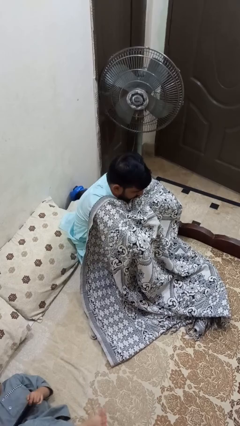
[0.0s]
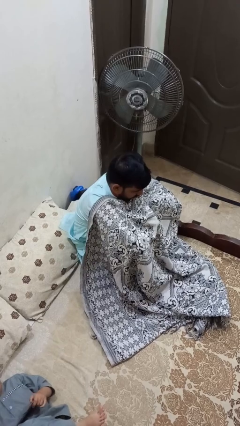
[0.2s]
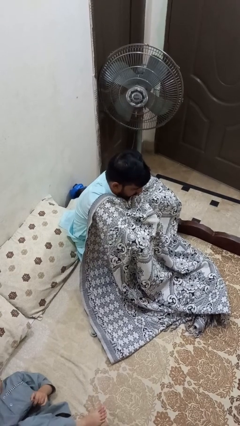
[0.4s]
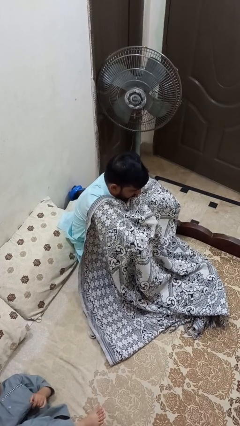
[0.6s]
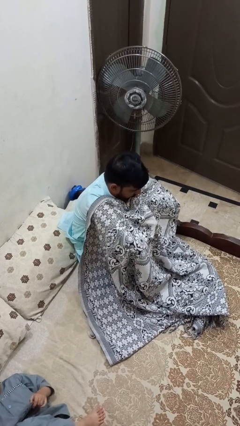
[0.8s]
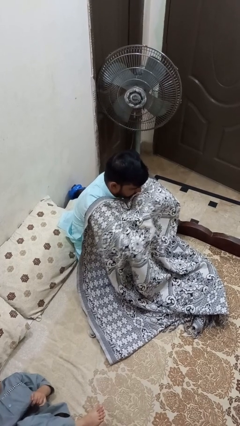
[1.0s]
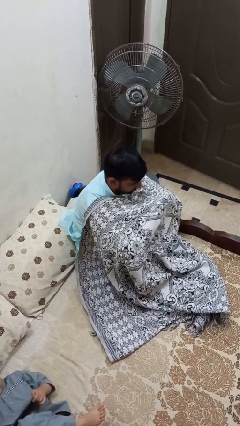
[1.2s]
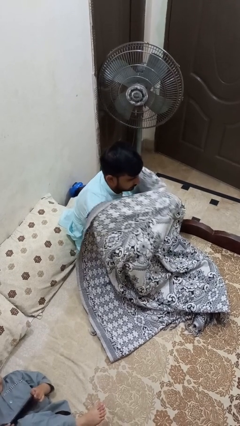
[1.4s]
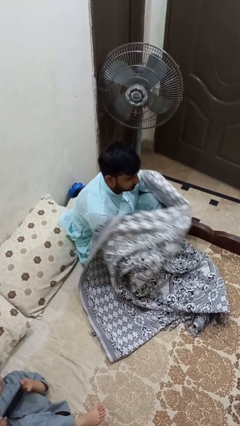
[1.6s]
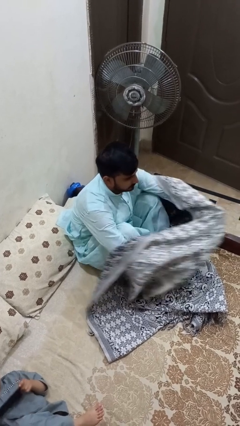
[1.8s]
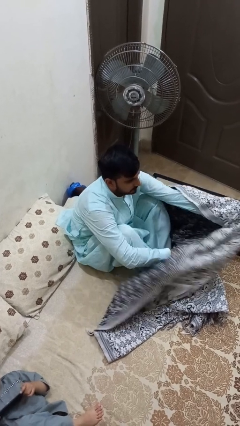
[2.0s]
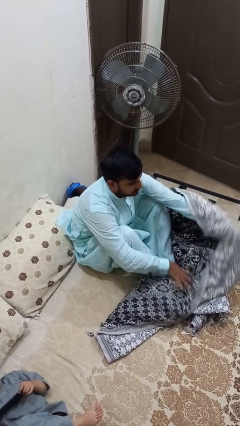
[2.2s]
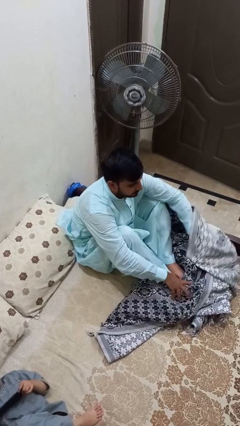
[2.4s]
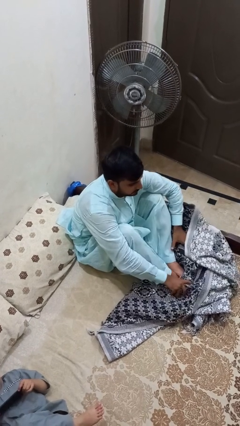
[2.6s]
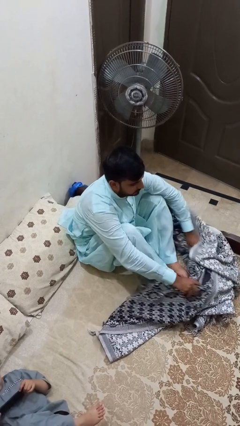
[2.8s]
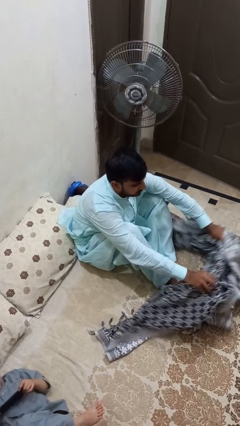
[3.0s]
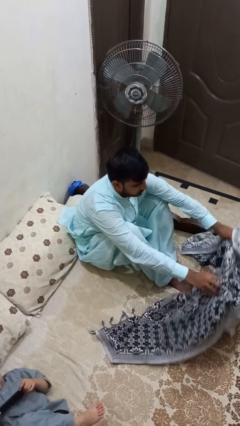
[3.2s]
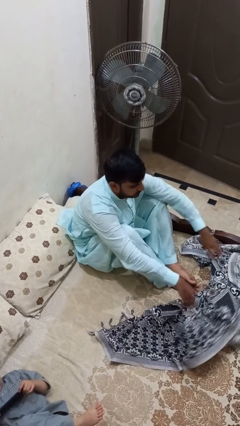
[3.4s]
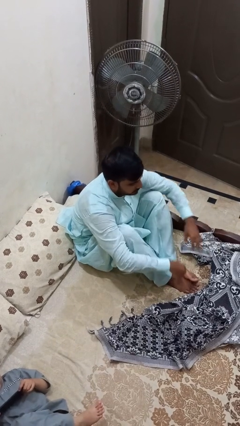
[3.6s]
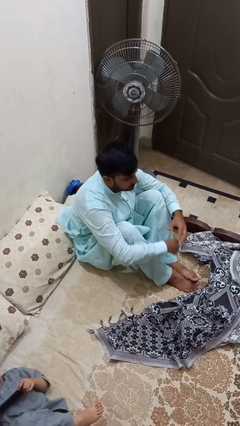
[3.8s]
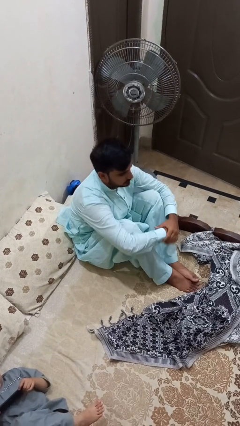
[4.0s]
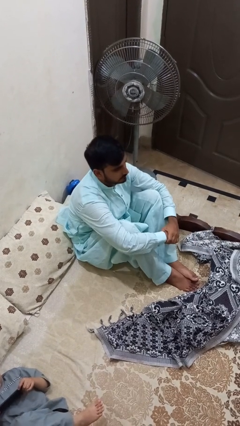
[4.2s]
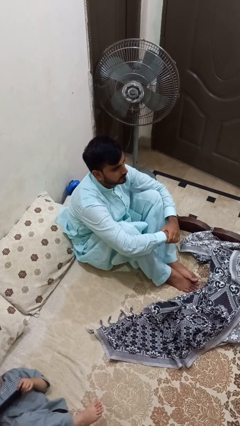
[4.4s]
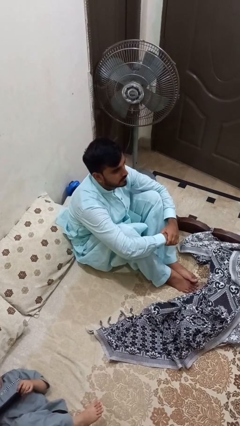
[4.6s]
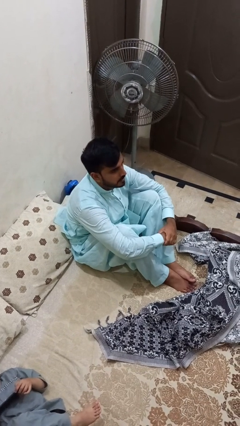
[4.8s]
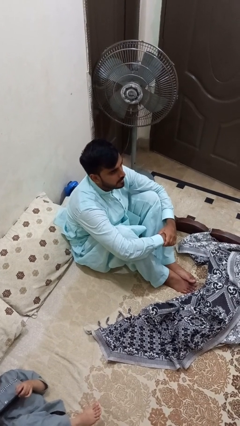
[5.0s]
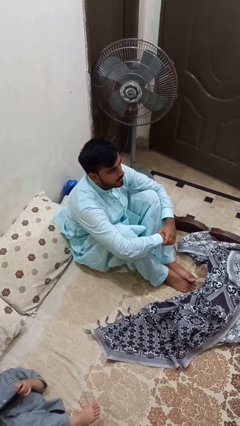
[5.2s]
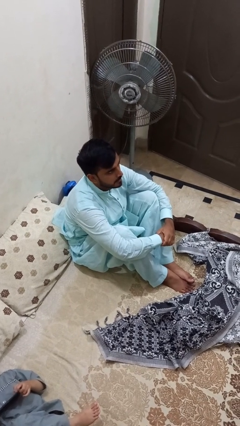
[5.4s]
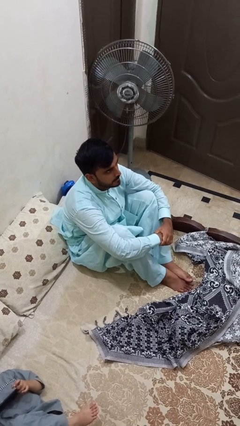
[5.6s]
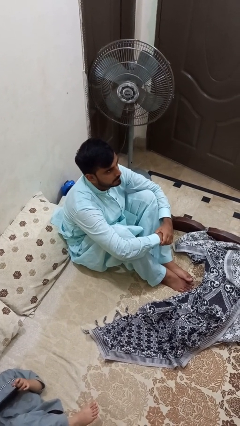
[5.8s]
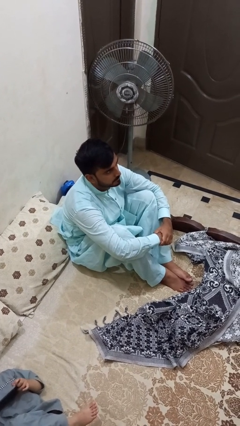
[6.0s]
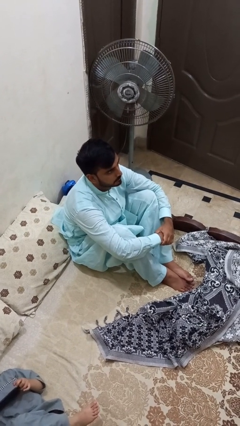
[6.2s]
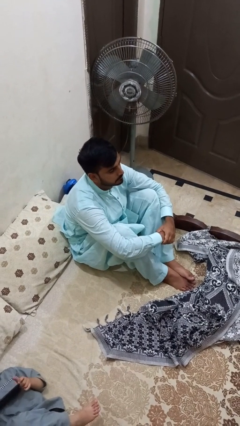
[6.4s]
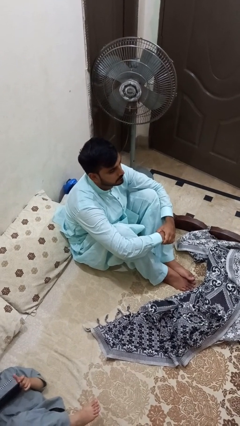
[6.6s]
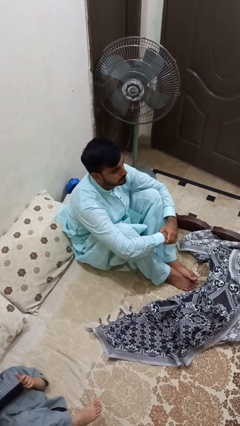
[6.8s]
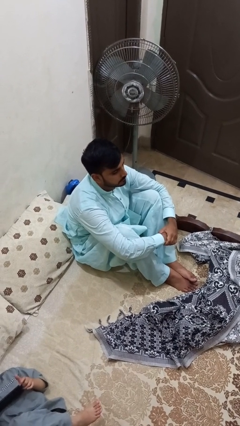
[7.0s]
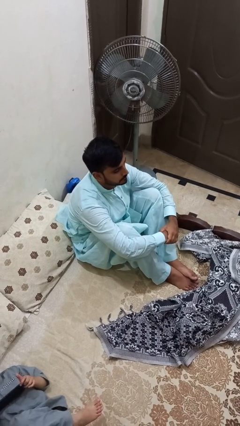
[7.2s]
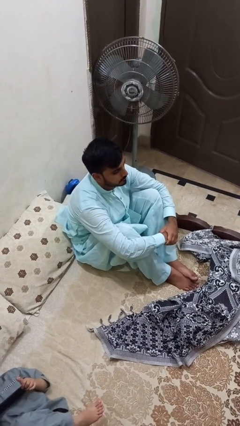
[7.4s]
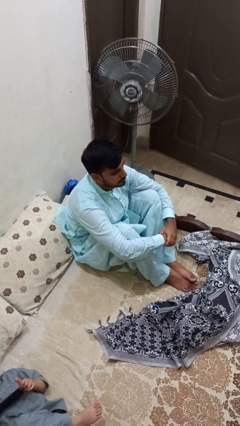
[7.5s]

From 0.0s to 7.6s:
person uncovers with blanket

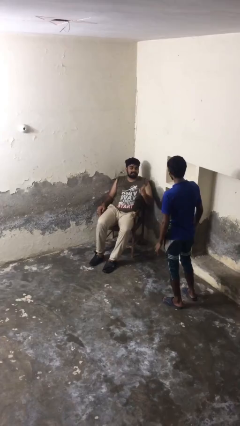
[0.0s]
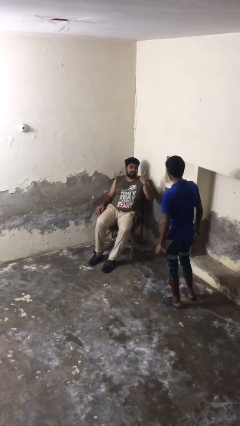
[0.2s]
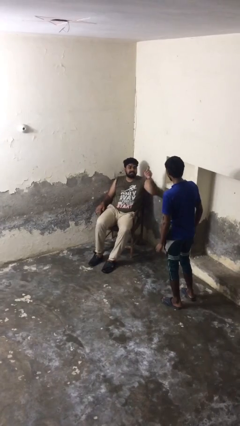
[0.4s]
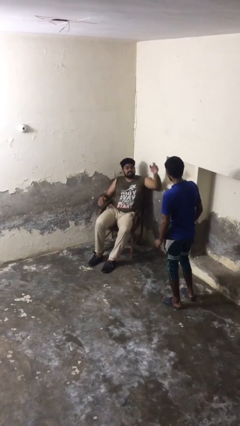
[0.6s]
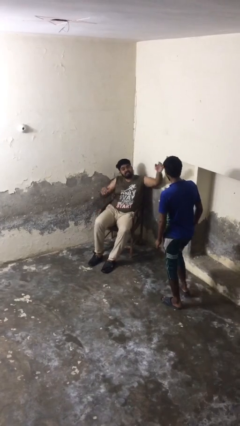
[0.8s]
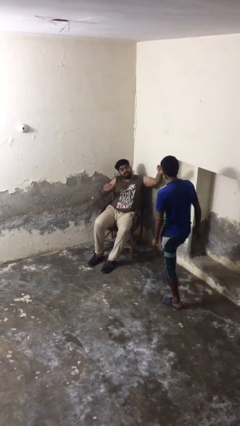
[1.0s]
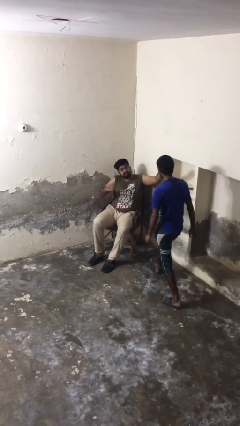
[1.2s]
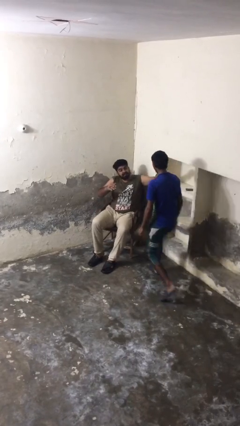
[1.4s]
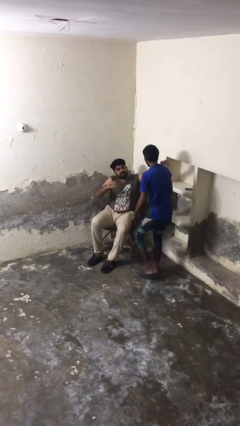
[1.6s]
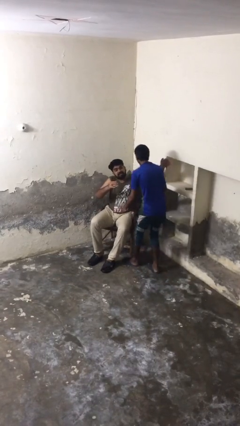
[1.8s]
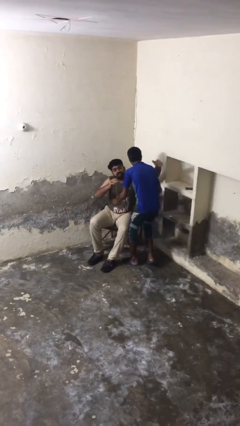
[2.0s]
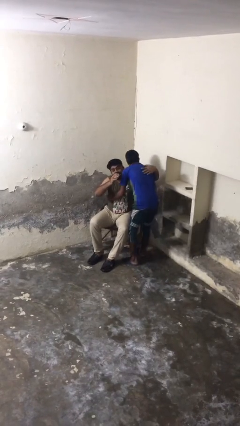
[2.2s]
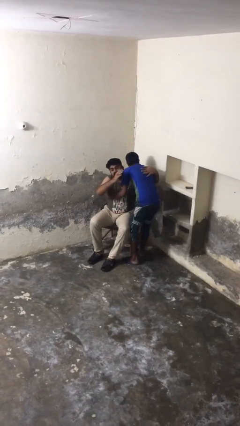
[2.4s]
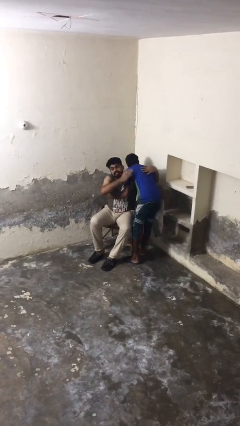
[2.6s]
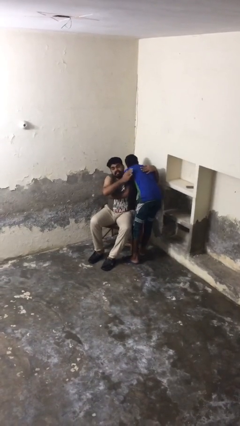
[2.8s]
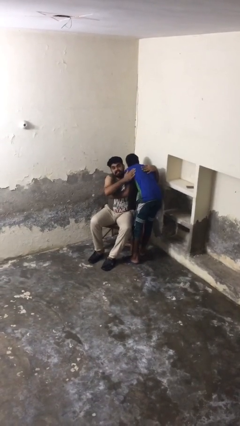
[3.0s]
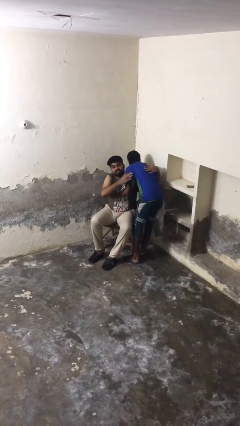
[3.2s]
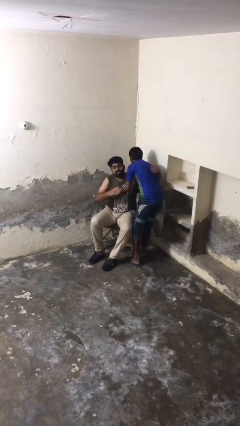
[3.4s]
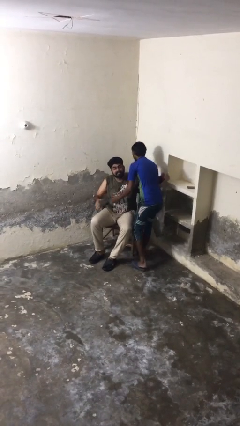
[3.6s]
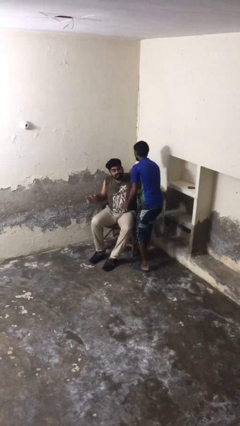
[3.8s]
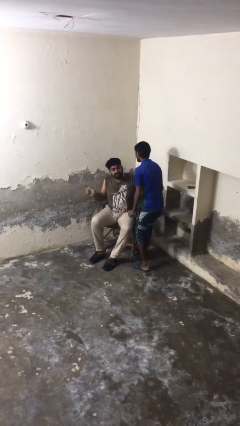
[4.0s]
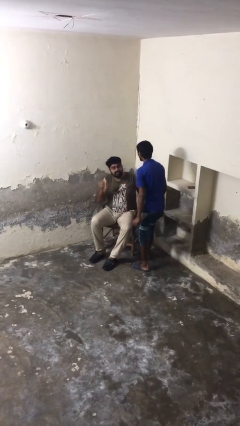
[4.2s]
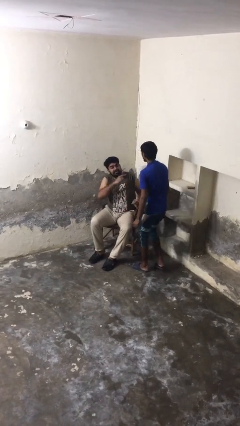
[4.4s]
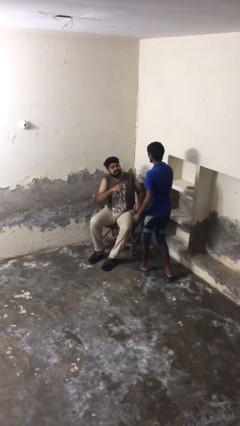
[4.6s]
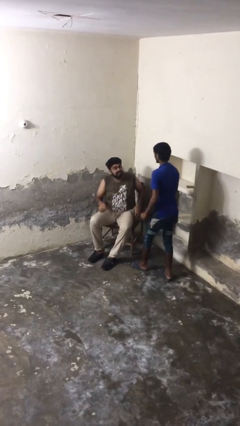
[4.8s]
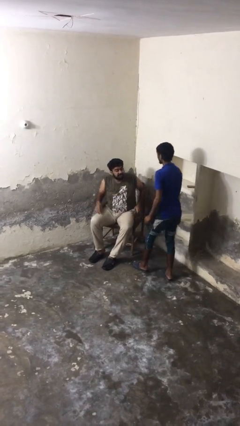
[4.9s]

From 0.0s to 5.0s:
person embraces person

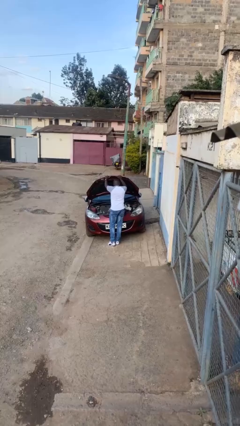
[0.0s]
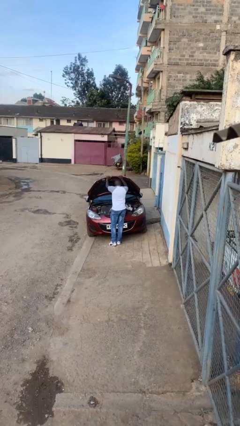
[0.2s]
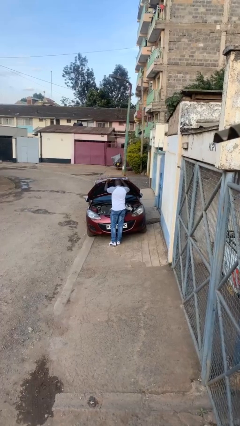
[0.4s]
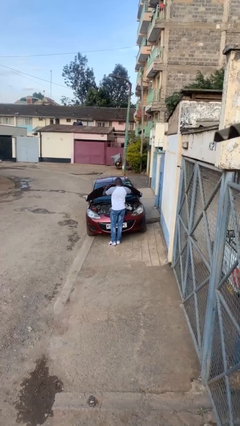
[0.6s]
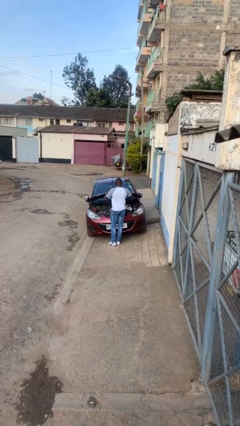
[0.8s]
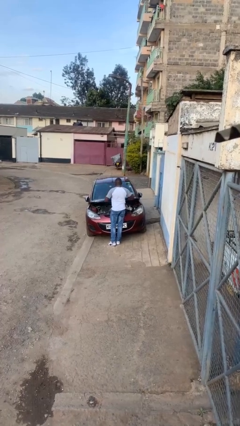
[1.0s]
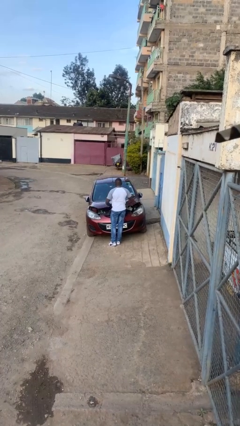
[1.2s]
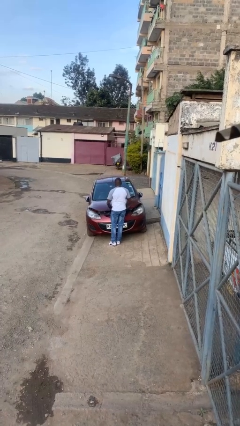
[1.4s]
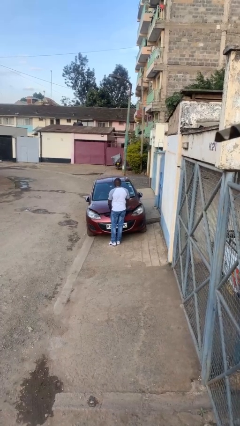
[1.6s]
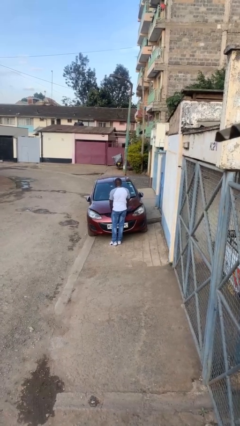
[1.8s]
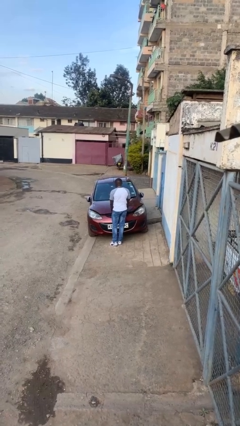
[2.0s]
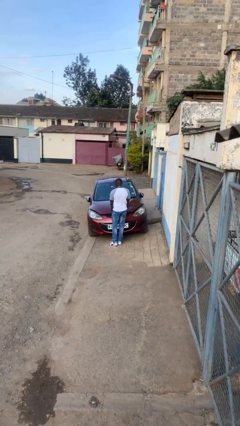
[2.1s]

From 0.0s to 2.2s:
person closes car hood

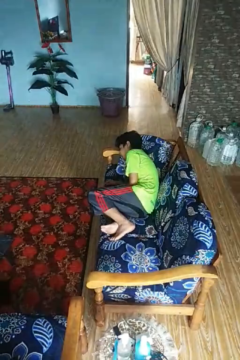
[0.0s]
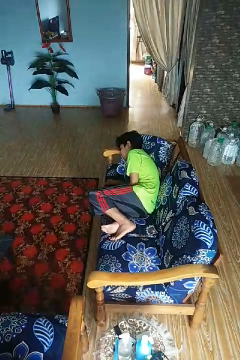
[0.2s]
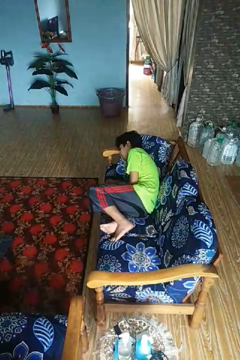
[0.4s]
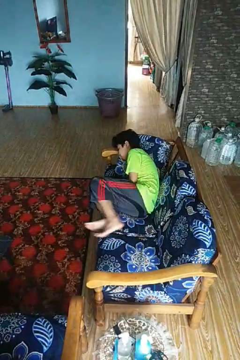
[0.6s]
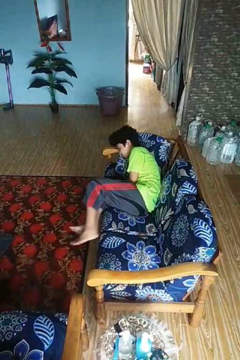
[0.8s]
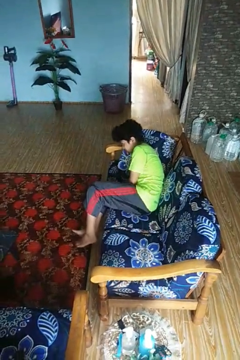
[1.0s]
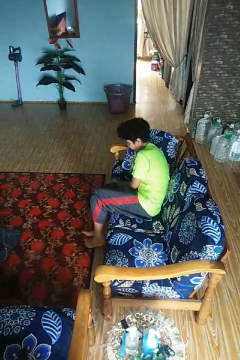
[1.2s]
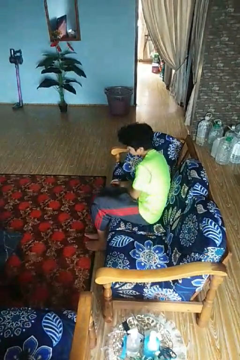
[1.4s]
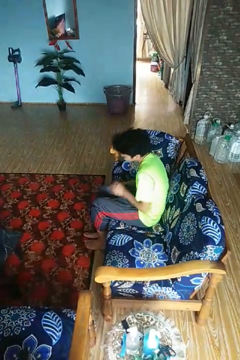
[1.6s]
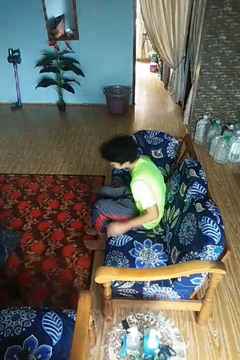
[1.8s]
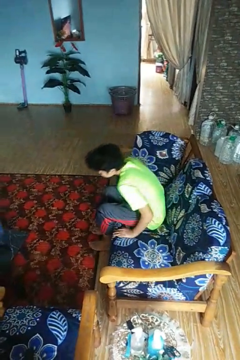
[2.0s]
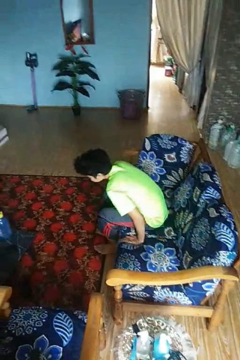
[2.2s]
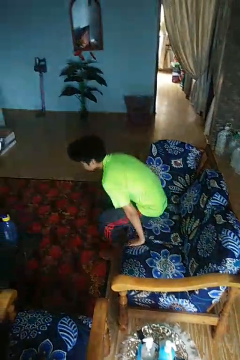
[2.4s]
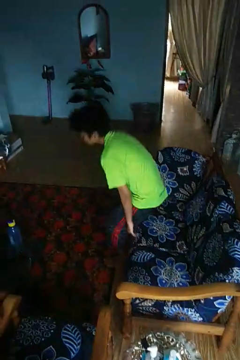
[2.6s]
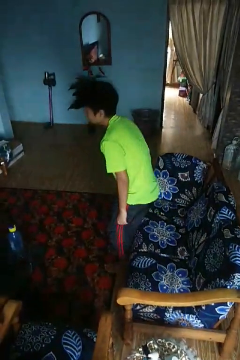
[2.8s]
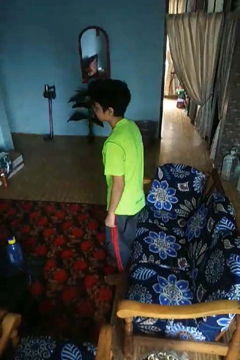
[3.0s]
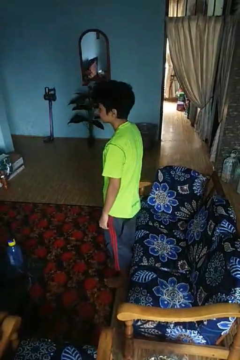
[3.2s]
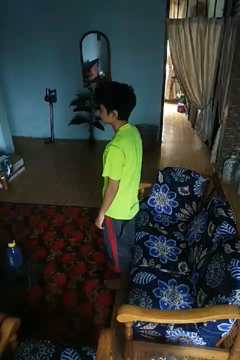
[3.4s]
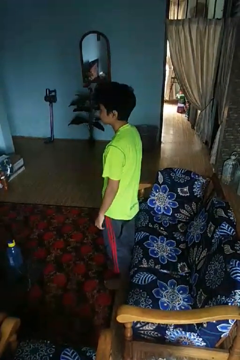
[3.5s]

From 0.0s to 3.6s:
person stands up
